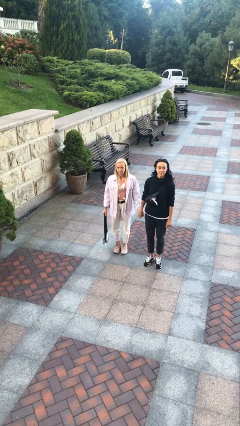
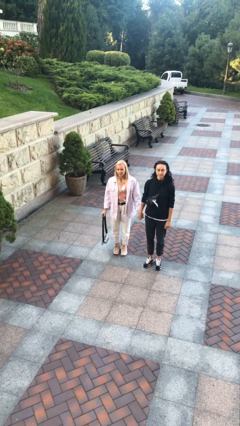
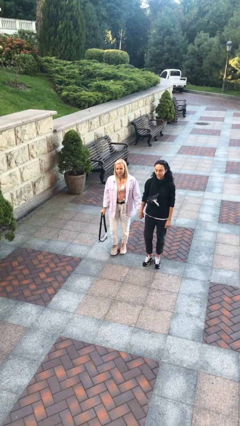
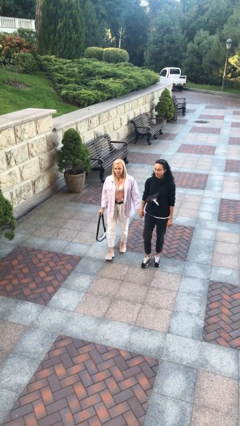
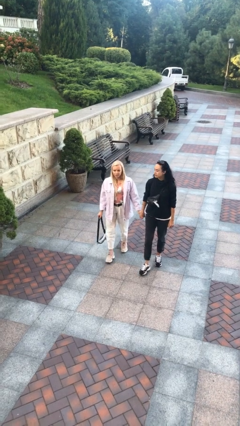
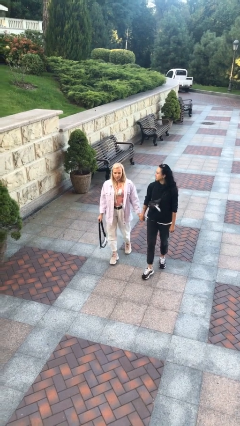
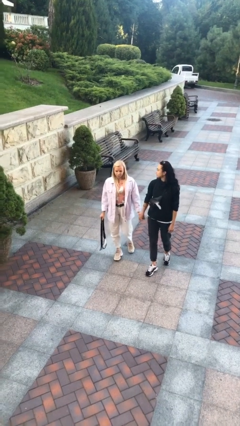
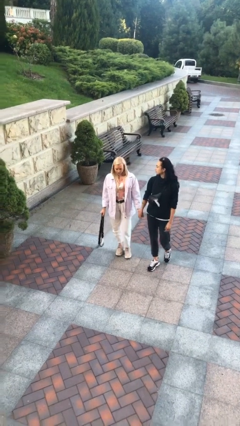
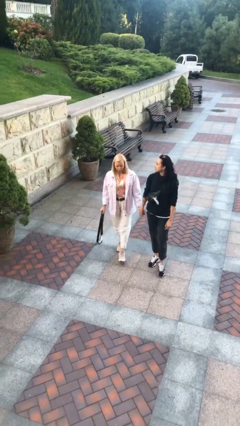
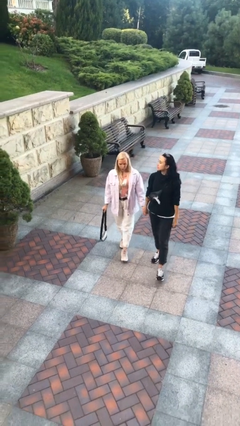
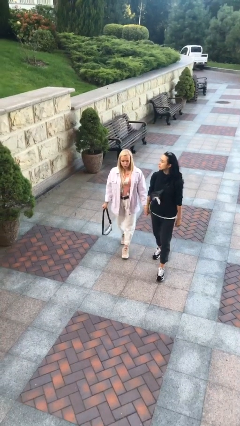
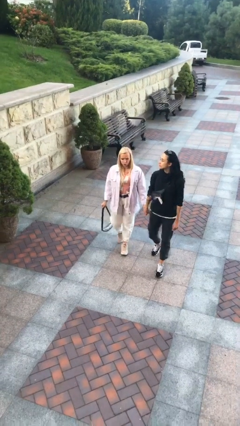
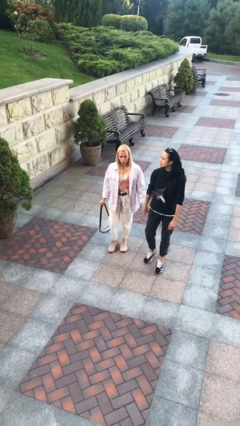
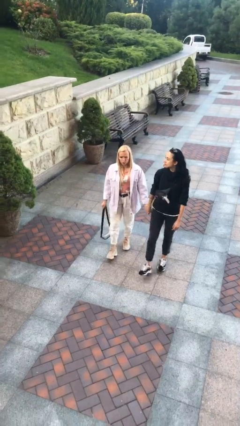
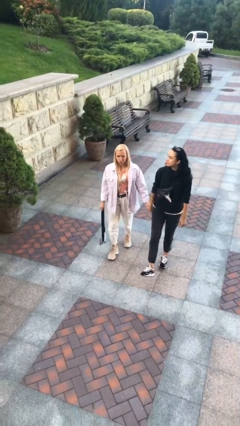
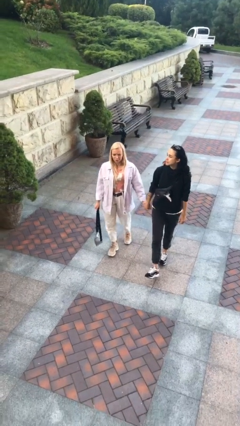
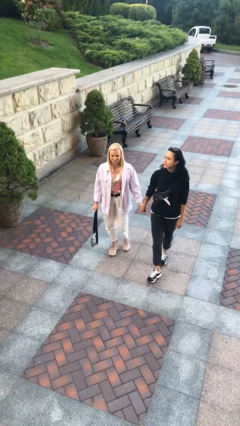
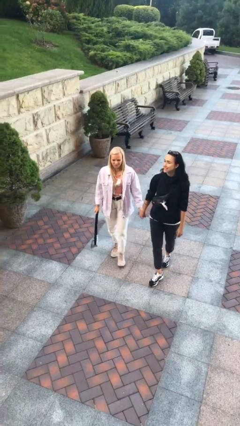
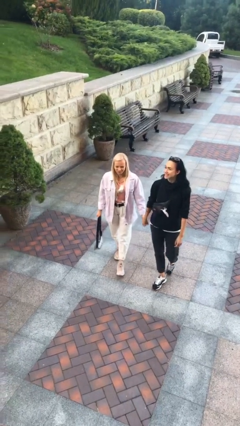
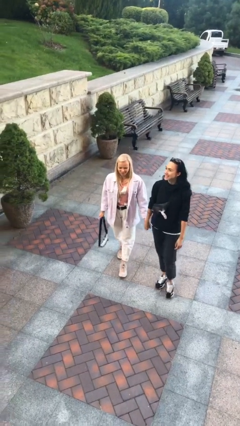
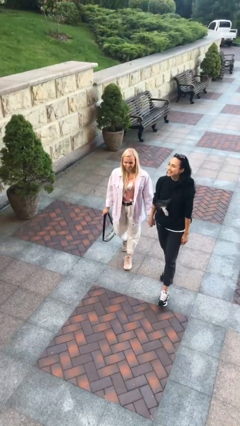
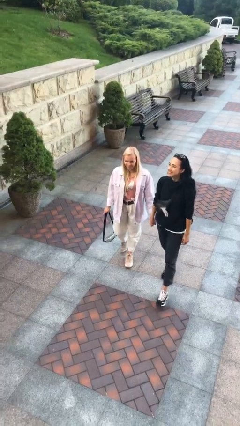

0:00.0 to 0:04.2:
person holds hand

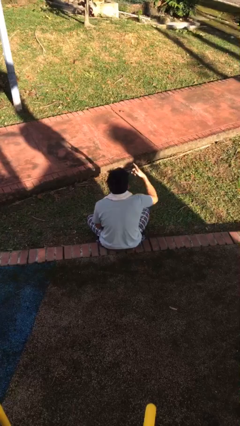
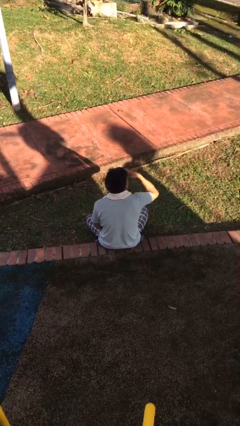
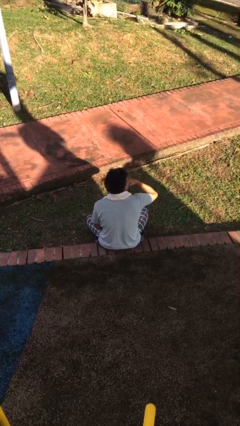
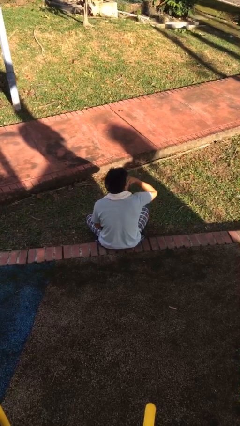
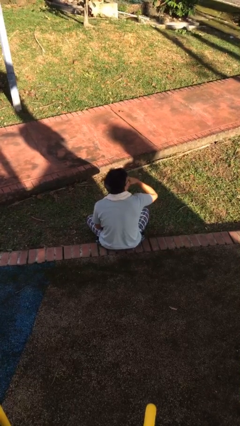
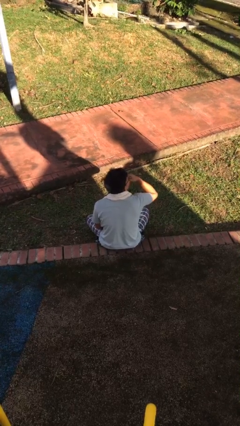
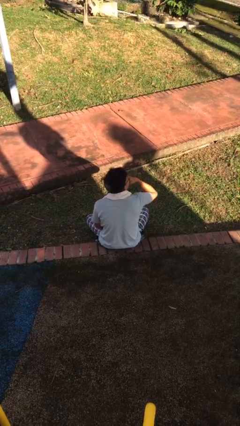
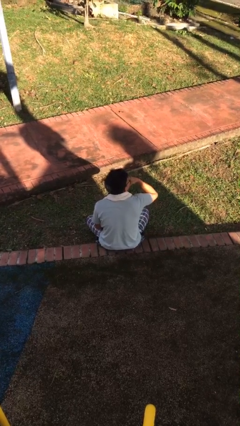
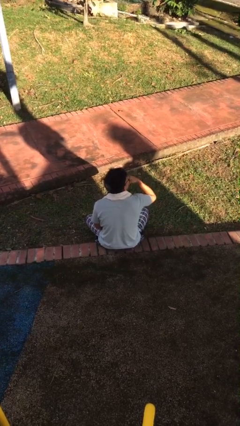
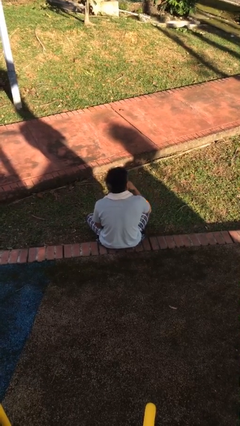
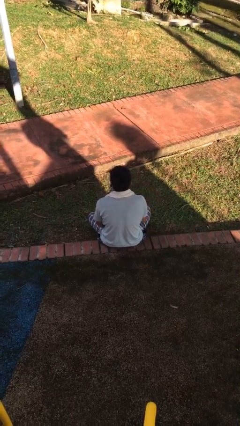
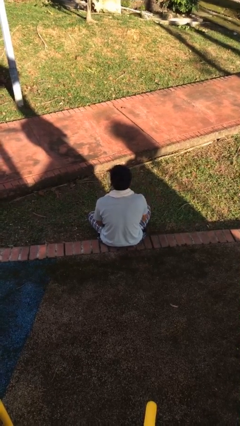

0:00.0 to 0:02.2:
person strokes chin

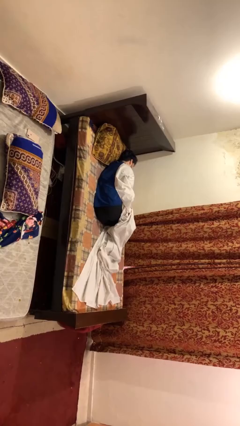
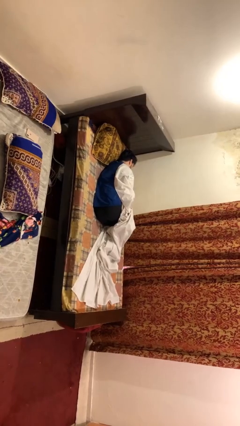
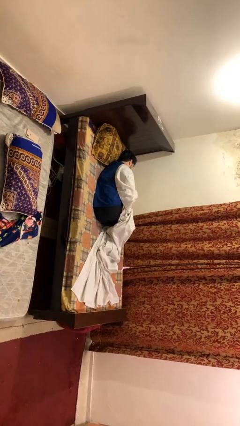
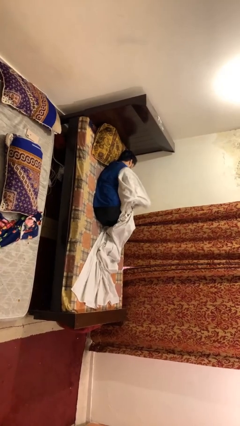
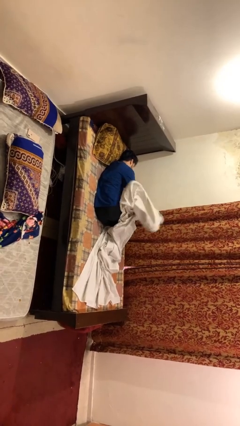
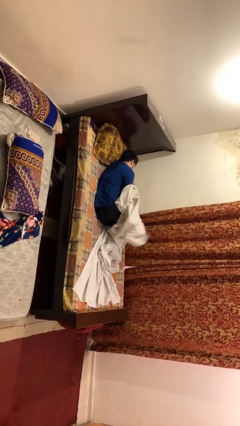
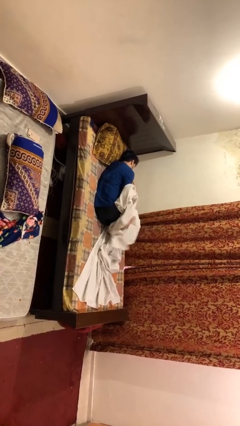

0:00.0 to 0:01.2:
person uncovers with bedsheets

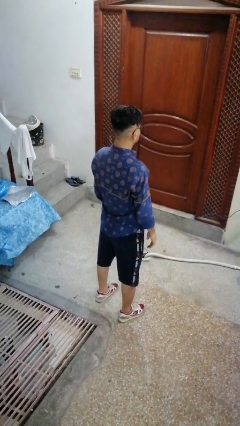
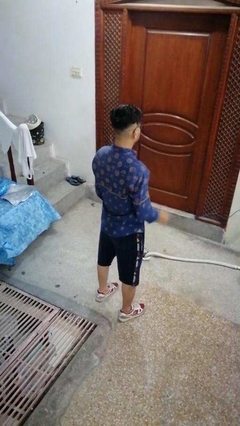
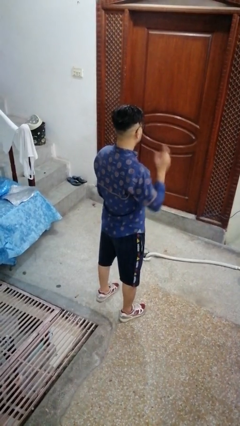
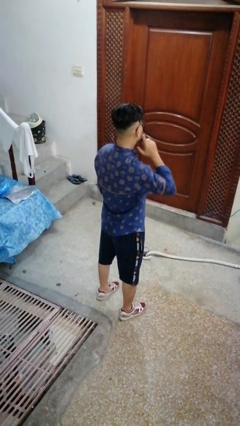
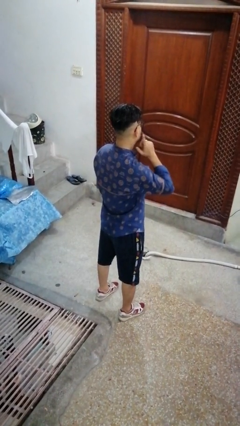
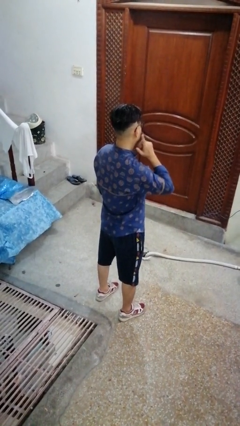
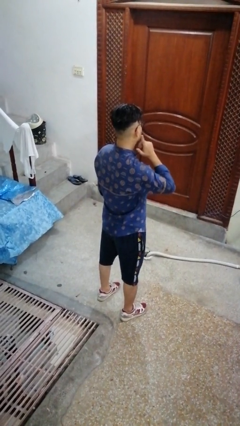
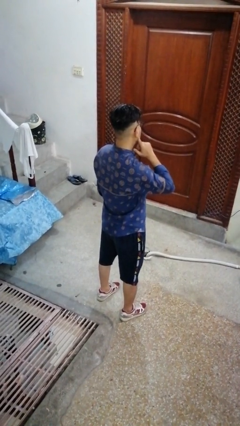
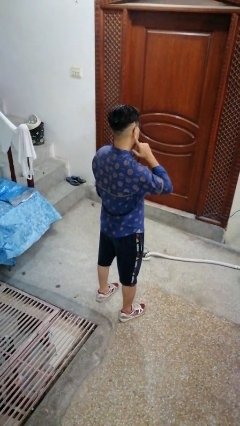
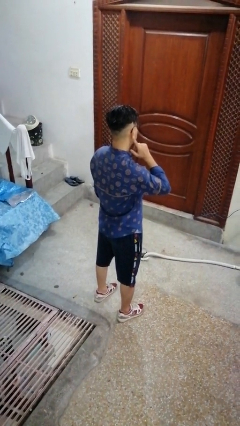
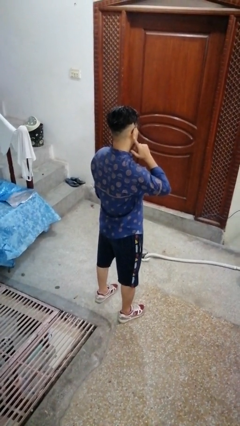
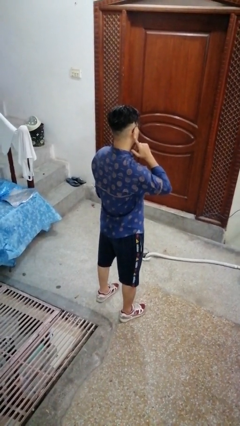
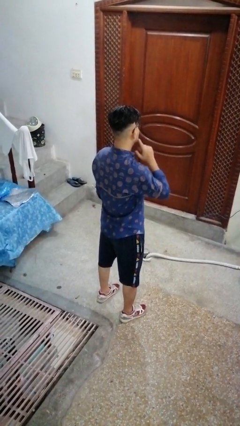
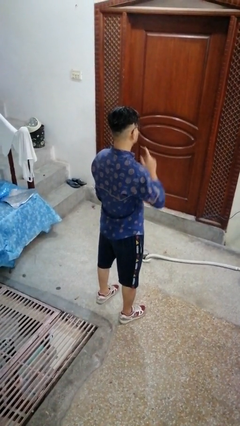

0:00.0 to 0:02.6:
person gestures listen closely

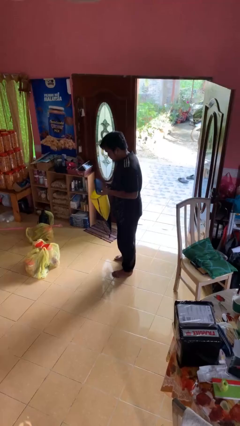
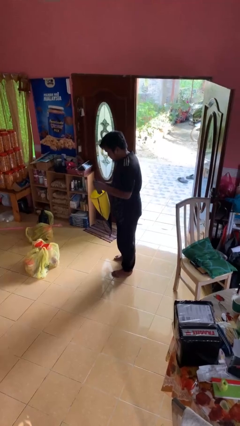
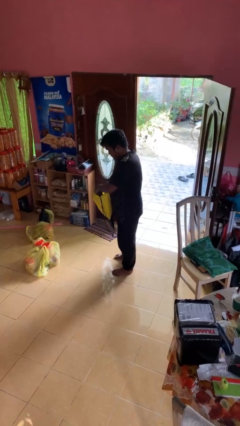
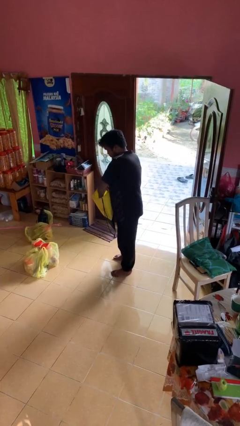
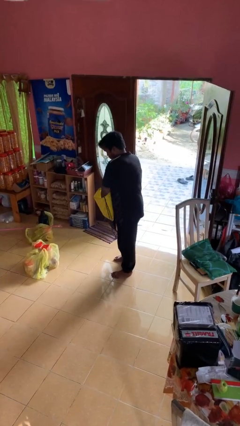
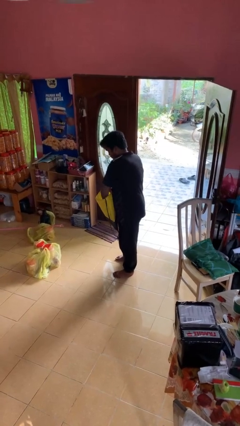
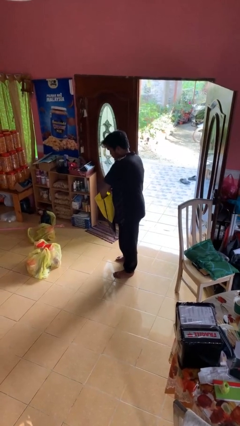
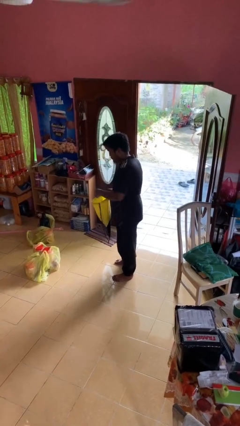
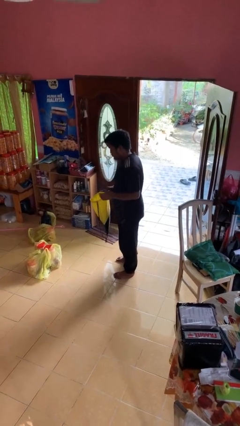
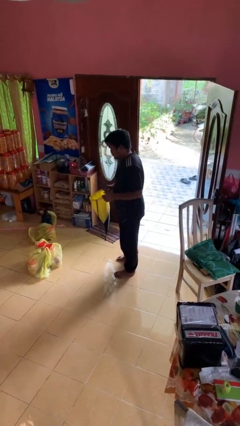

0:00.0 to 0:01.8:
person puts object into bag

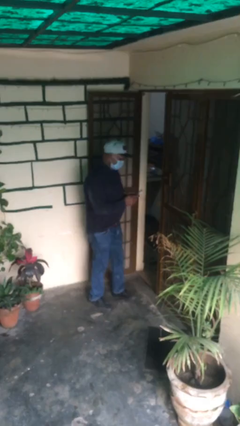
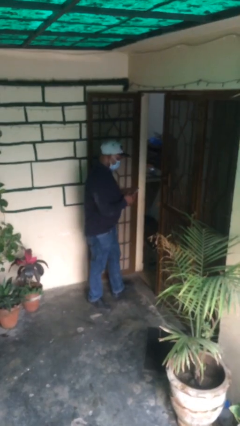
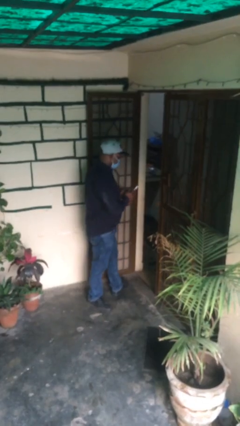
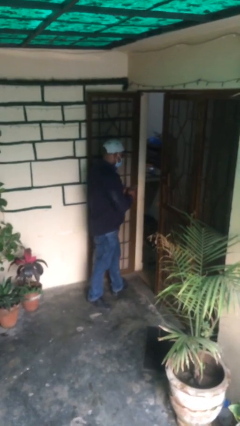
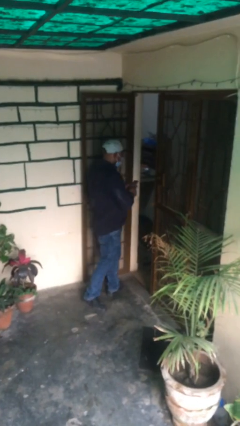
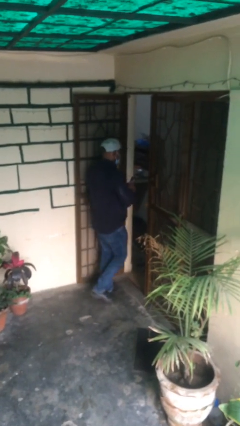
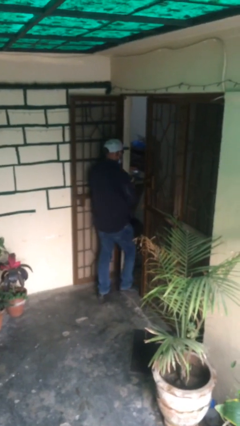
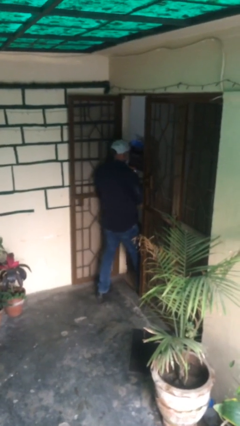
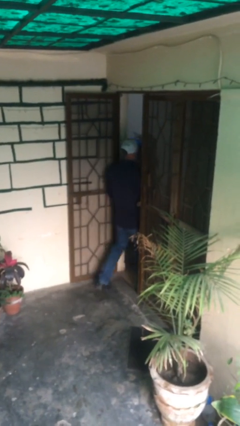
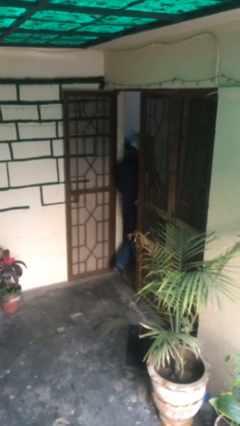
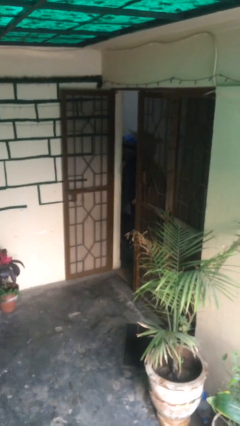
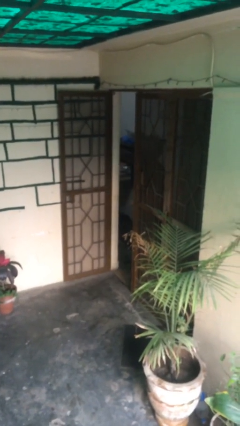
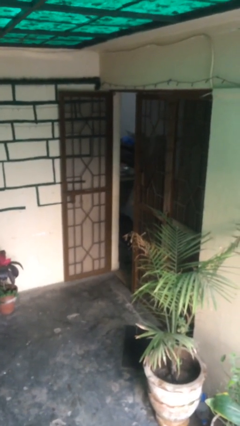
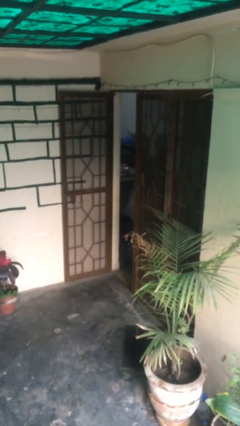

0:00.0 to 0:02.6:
person exits scene through structure

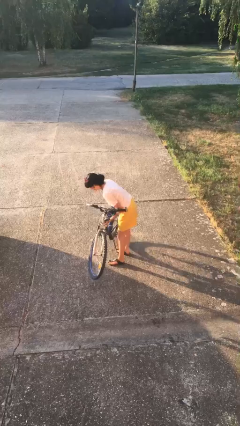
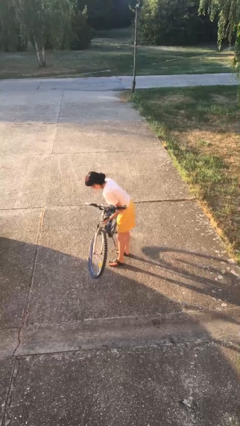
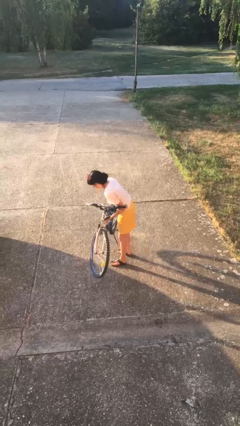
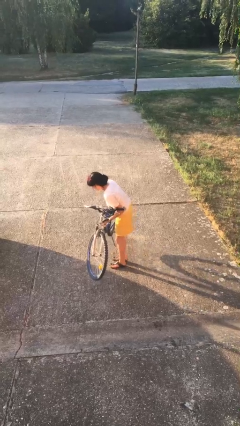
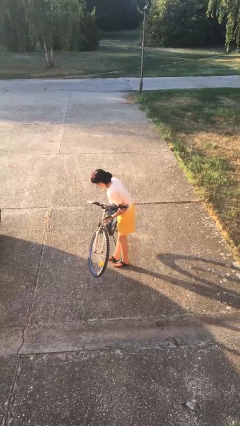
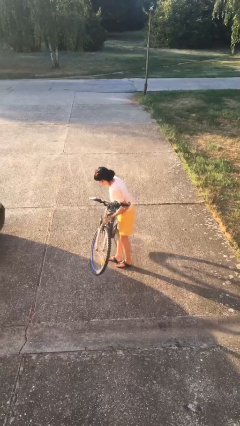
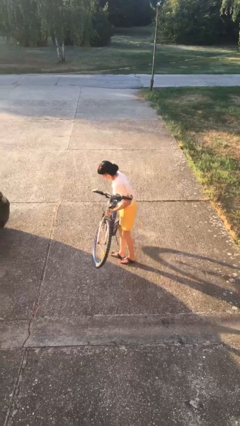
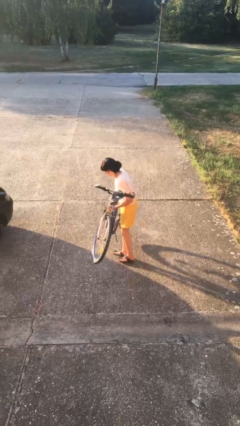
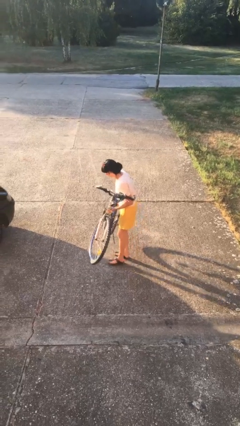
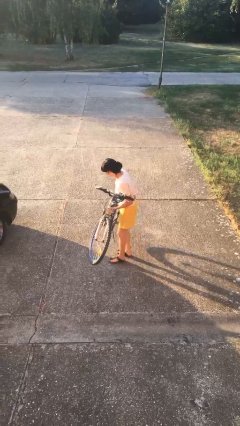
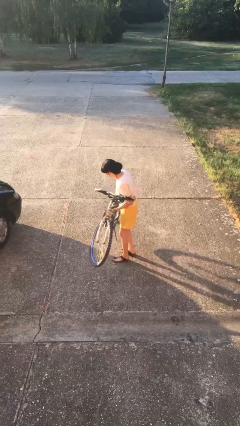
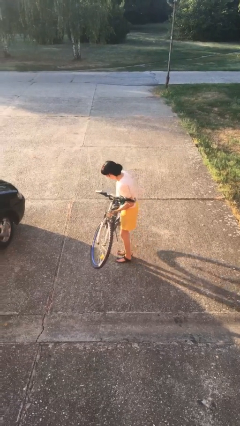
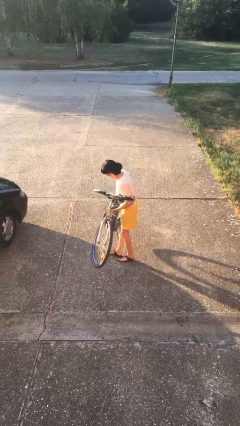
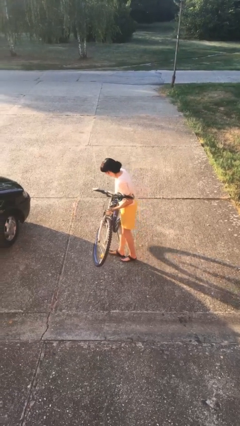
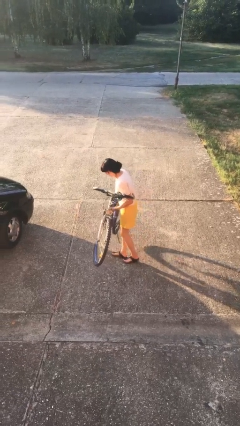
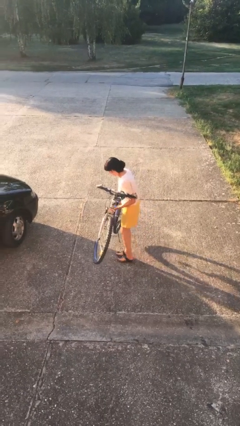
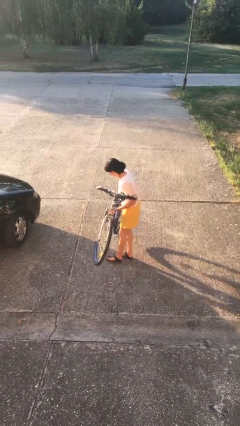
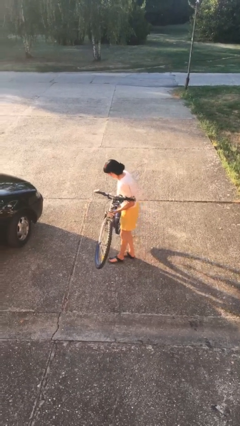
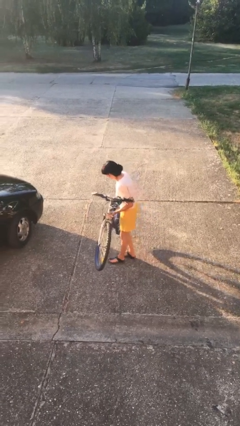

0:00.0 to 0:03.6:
person carries heavy object
